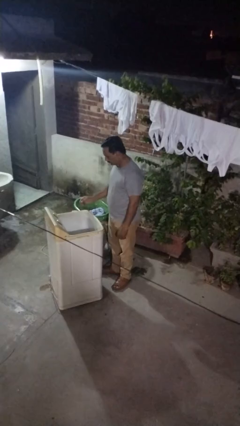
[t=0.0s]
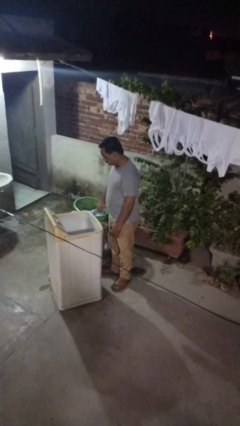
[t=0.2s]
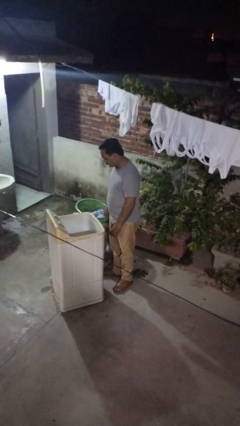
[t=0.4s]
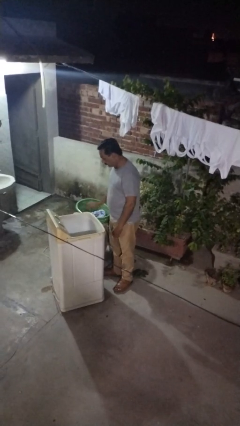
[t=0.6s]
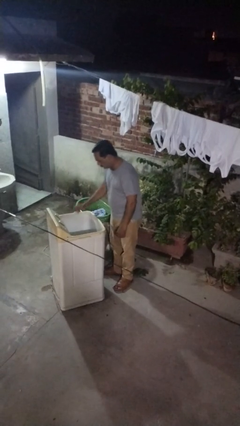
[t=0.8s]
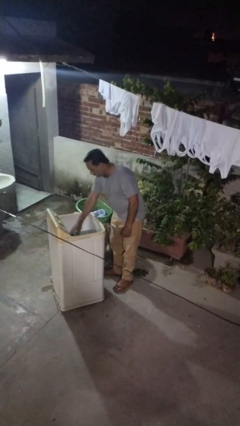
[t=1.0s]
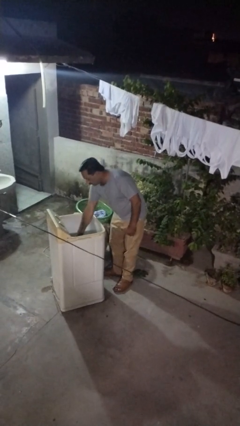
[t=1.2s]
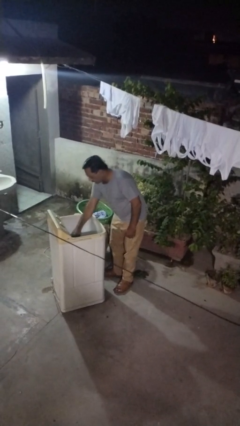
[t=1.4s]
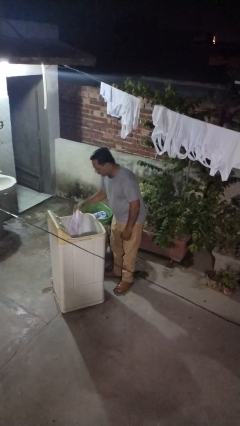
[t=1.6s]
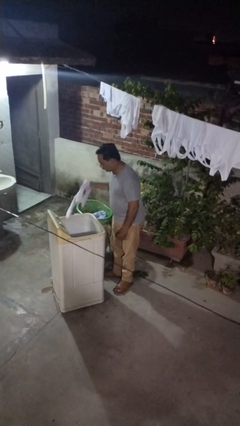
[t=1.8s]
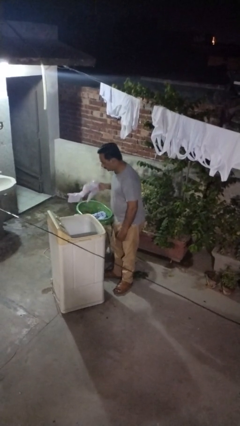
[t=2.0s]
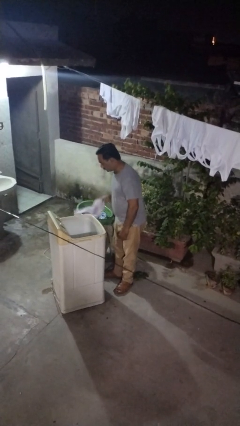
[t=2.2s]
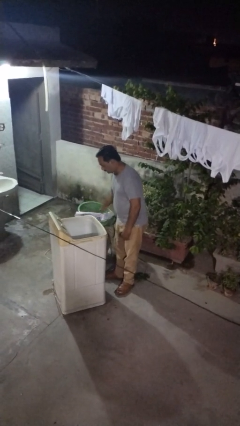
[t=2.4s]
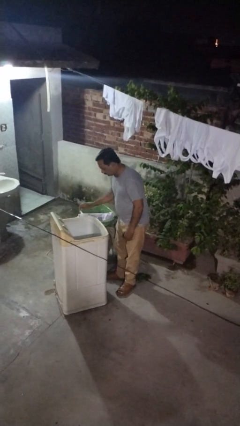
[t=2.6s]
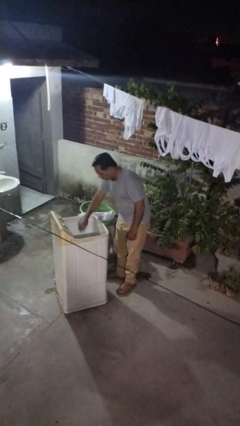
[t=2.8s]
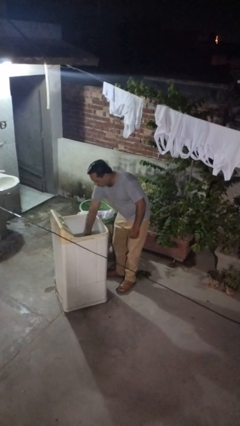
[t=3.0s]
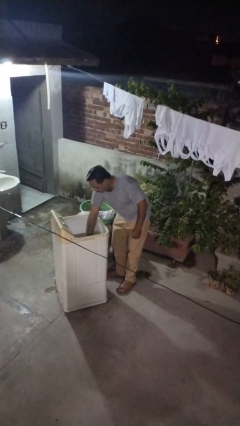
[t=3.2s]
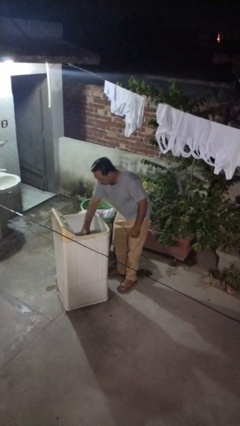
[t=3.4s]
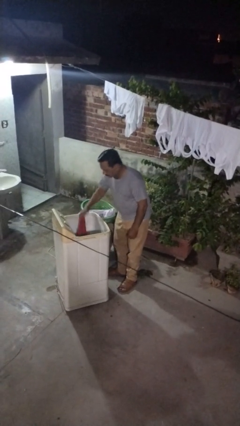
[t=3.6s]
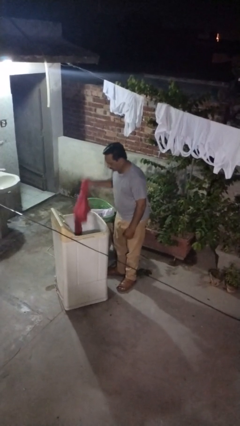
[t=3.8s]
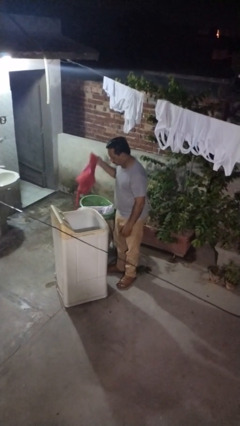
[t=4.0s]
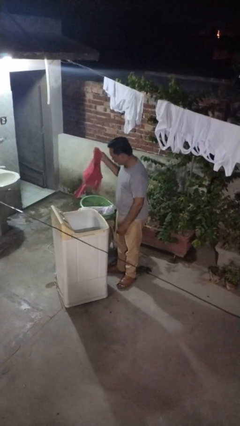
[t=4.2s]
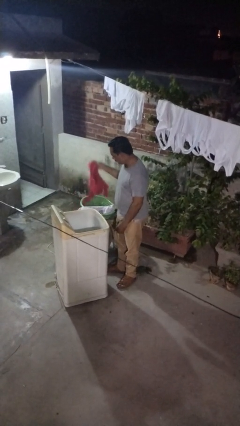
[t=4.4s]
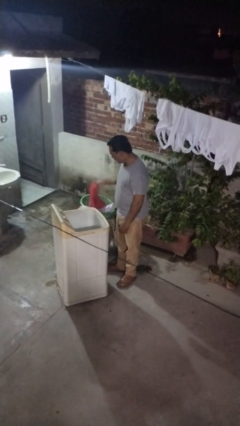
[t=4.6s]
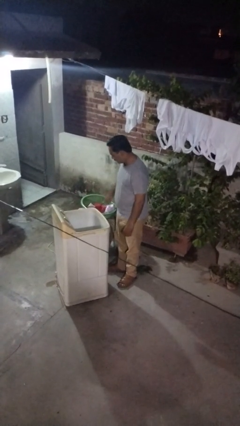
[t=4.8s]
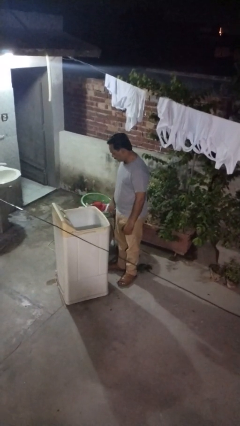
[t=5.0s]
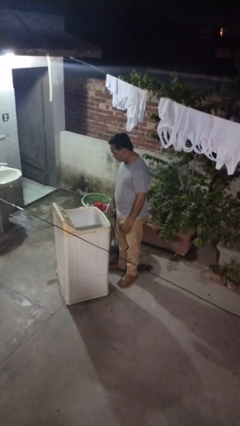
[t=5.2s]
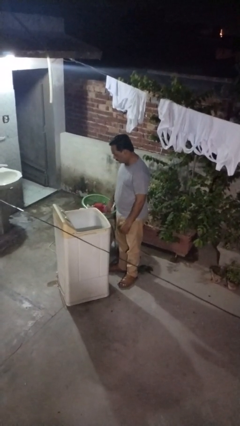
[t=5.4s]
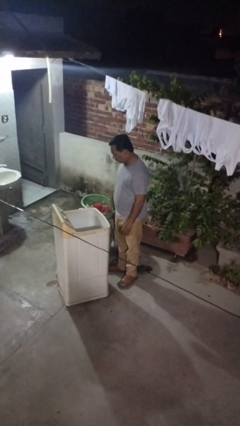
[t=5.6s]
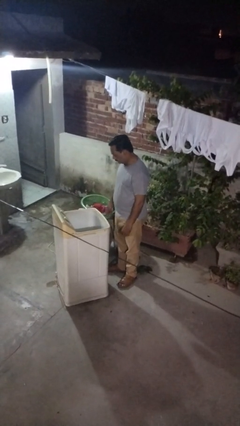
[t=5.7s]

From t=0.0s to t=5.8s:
person loads clotheswasher

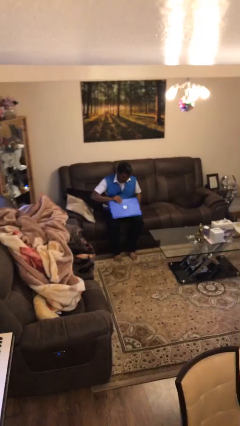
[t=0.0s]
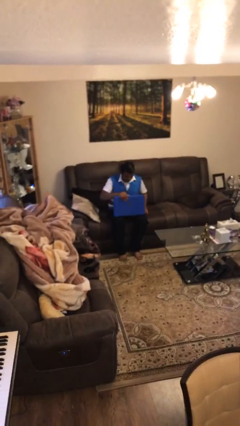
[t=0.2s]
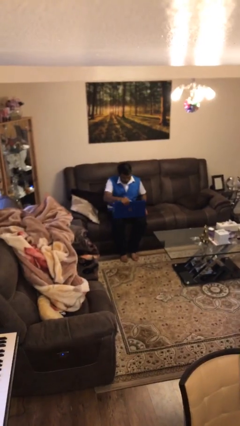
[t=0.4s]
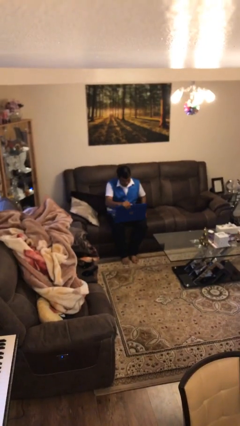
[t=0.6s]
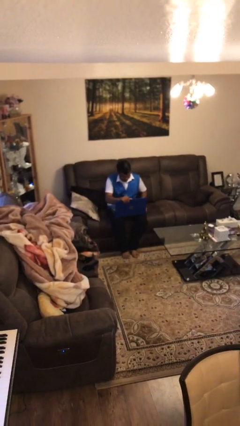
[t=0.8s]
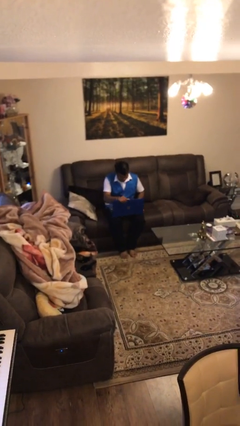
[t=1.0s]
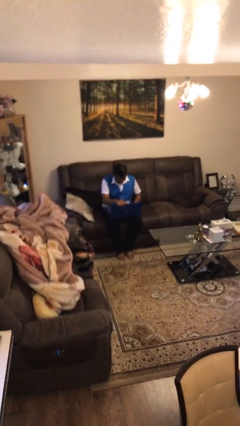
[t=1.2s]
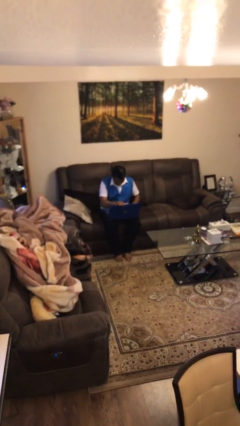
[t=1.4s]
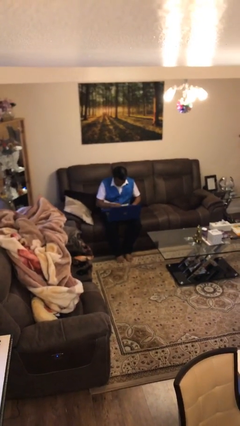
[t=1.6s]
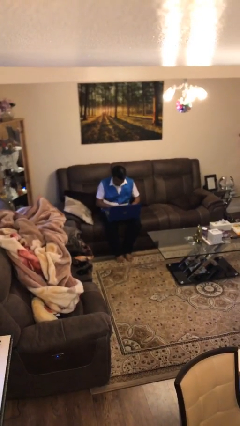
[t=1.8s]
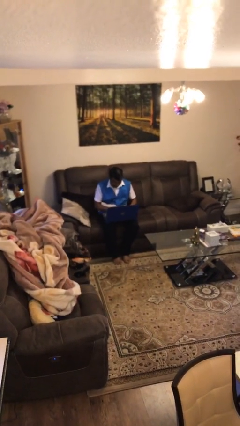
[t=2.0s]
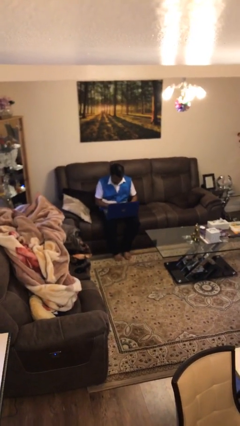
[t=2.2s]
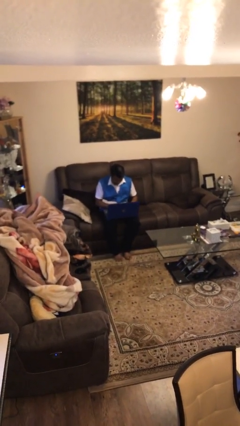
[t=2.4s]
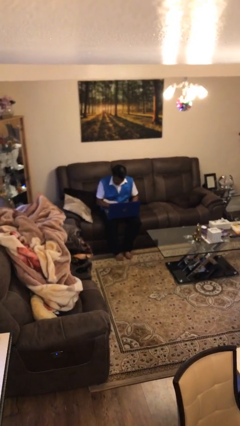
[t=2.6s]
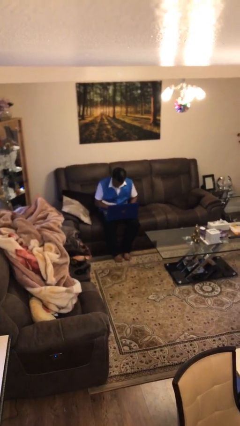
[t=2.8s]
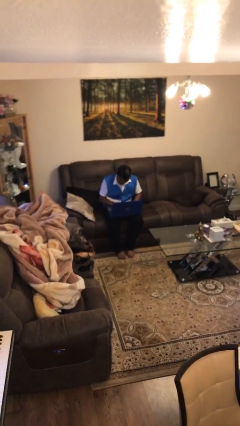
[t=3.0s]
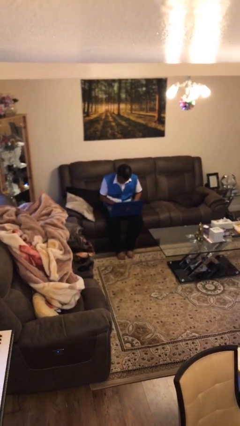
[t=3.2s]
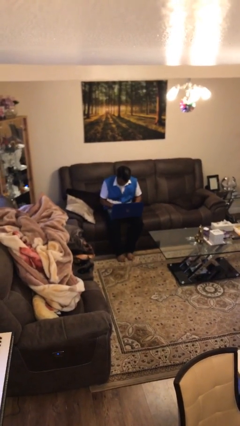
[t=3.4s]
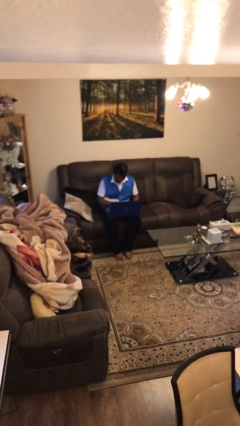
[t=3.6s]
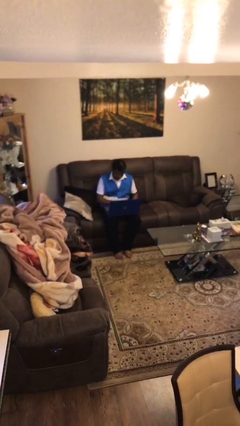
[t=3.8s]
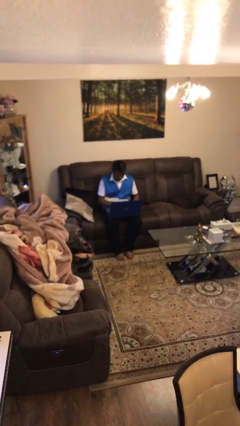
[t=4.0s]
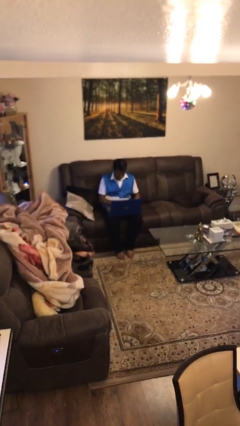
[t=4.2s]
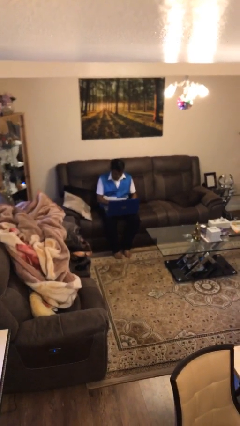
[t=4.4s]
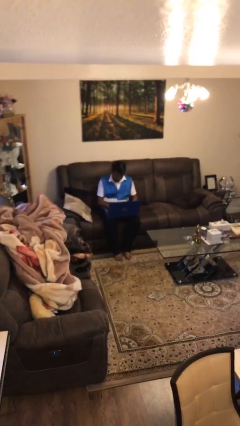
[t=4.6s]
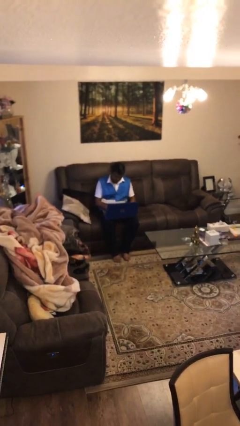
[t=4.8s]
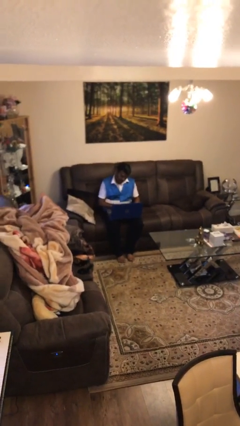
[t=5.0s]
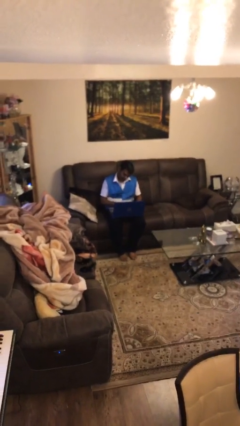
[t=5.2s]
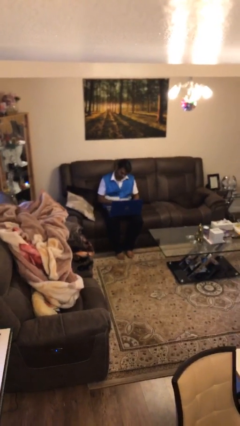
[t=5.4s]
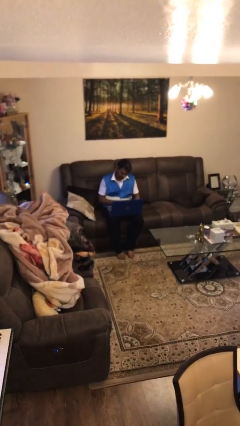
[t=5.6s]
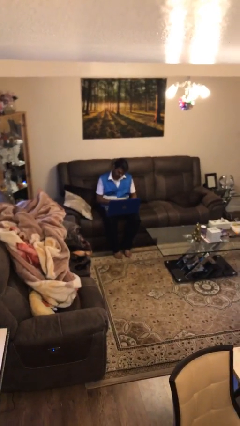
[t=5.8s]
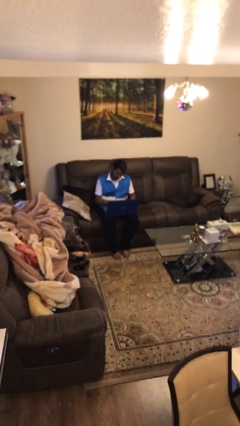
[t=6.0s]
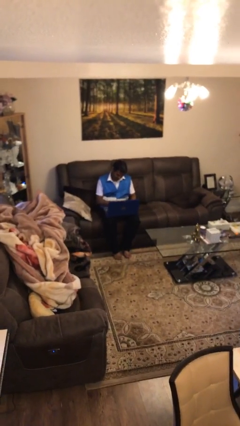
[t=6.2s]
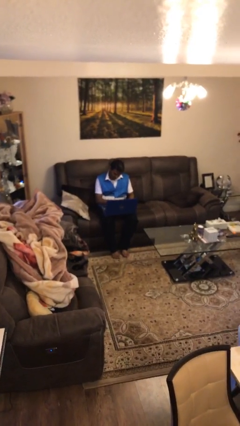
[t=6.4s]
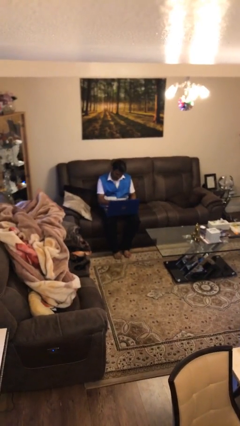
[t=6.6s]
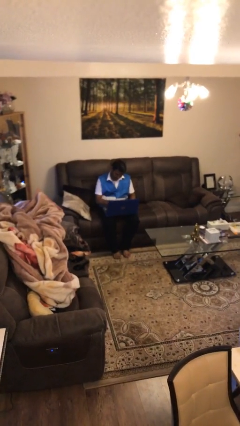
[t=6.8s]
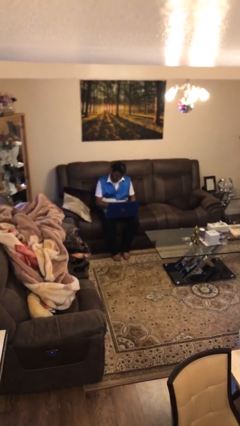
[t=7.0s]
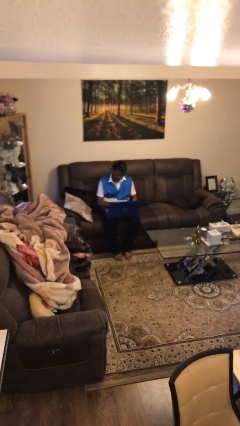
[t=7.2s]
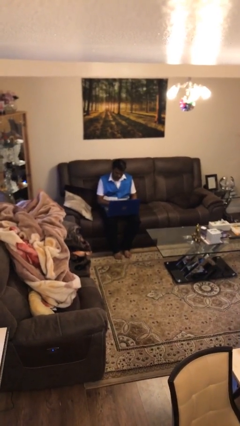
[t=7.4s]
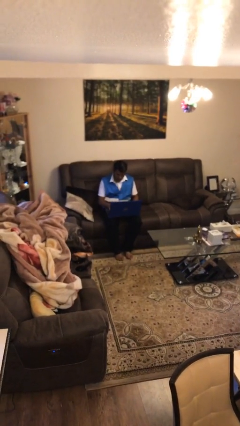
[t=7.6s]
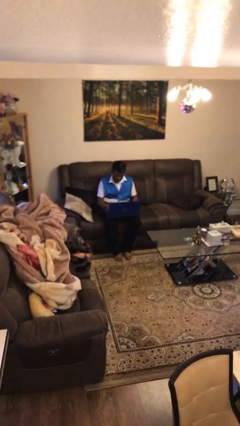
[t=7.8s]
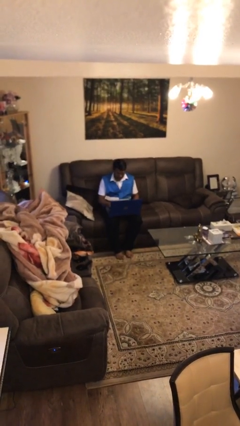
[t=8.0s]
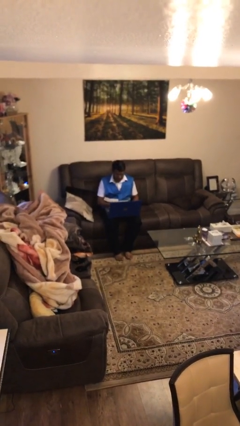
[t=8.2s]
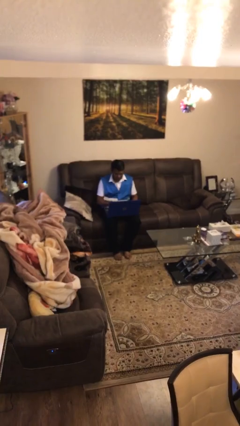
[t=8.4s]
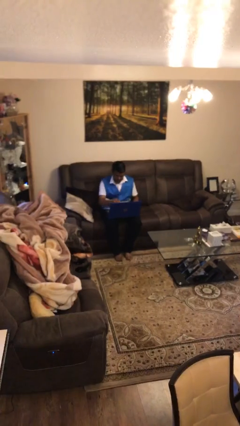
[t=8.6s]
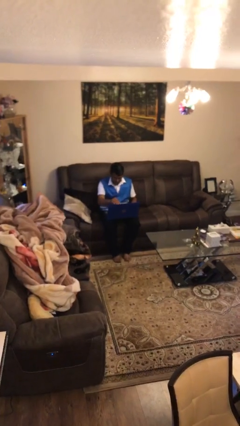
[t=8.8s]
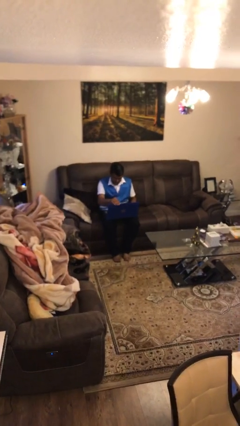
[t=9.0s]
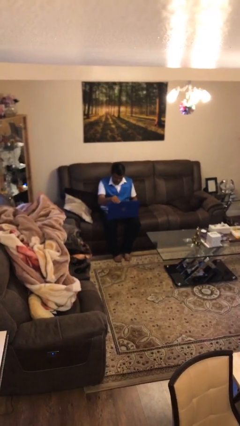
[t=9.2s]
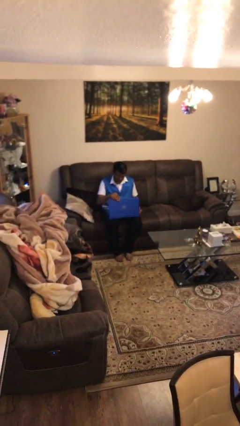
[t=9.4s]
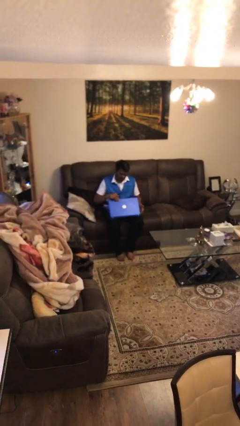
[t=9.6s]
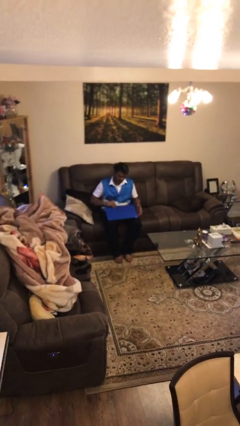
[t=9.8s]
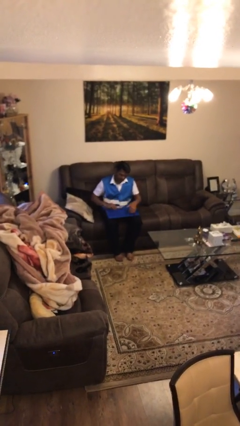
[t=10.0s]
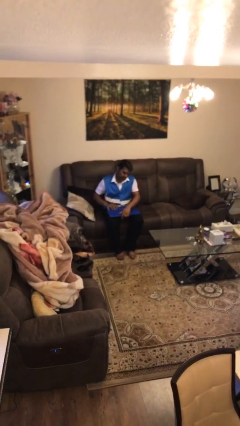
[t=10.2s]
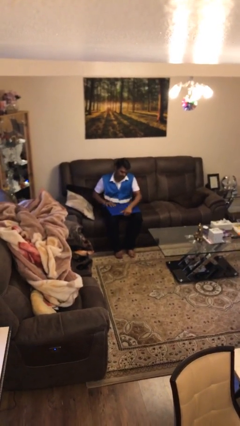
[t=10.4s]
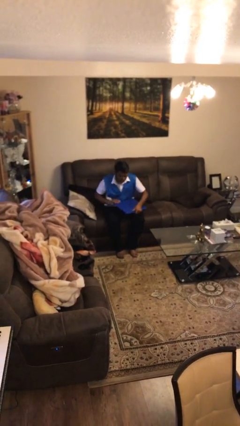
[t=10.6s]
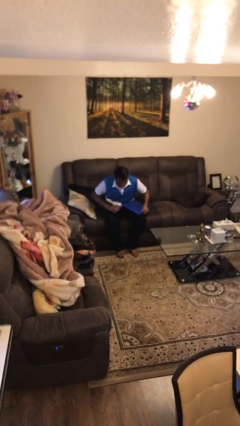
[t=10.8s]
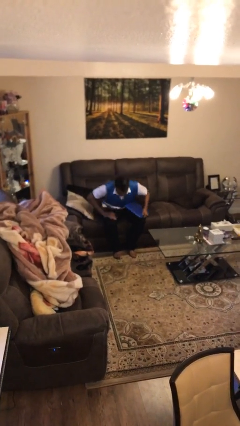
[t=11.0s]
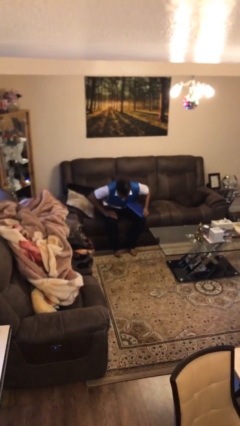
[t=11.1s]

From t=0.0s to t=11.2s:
person interacts with laptop

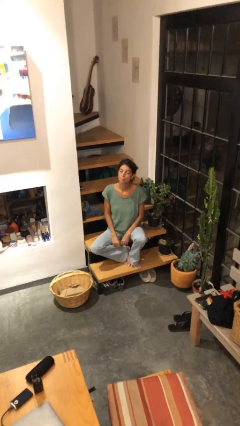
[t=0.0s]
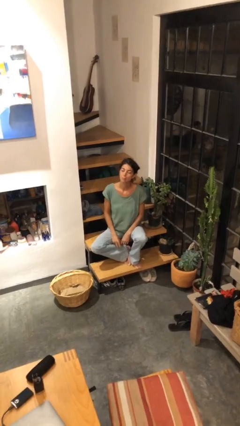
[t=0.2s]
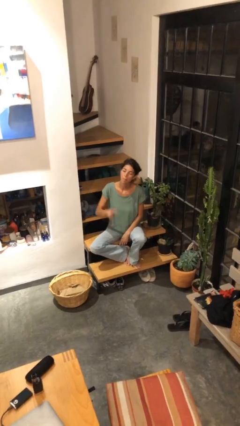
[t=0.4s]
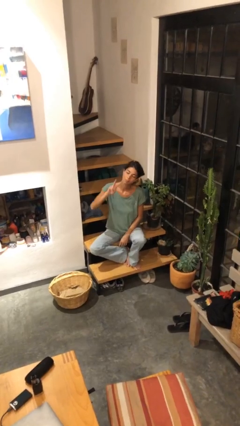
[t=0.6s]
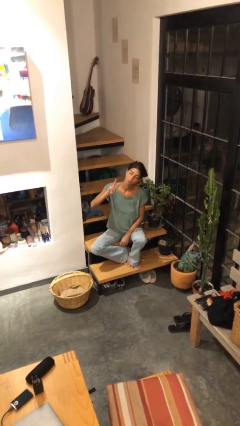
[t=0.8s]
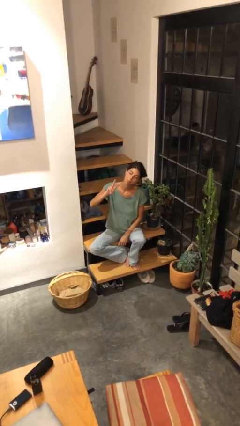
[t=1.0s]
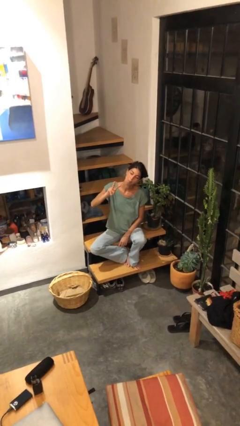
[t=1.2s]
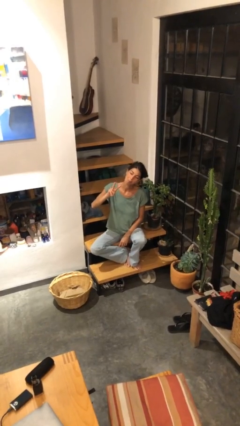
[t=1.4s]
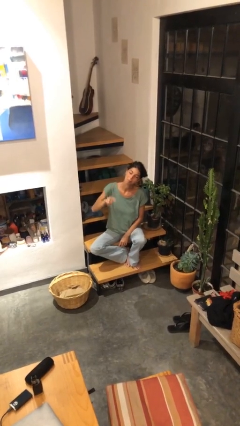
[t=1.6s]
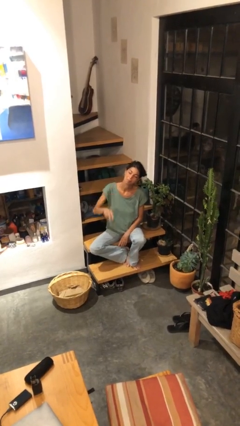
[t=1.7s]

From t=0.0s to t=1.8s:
person gestures peace
